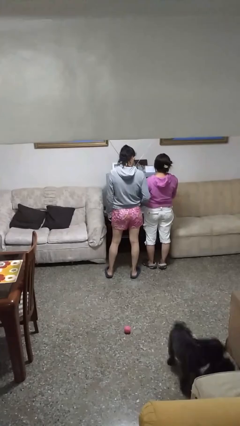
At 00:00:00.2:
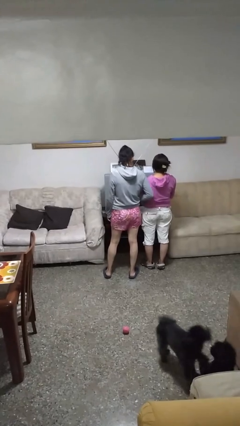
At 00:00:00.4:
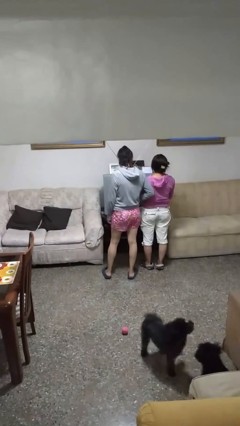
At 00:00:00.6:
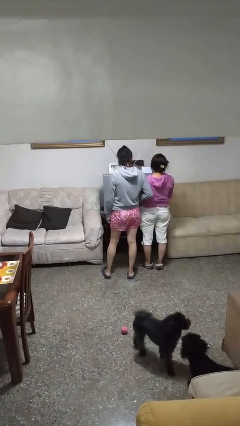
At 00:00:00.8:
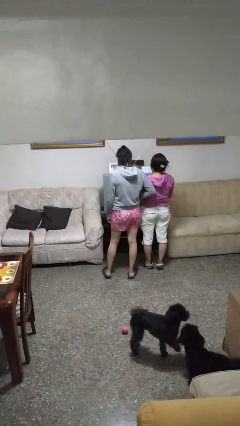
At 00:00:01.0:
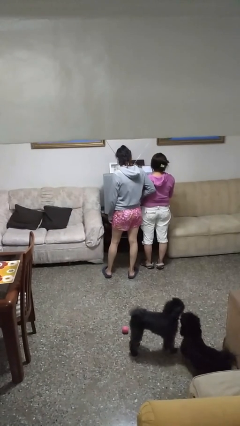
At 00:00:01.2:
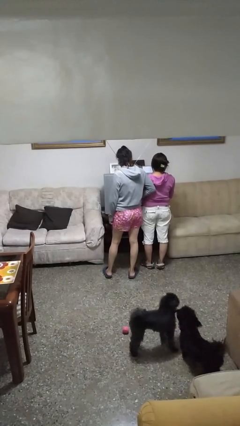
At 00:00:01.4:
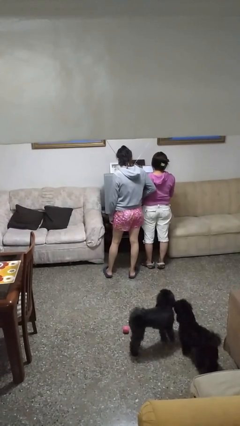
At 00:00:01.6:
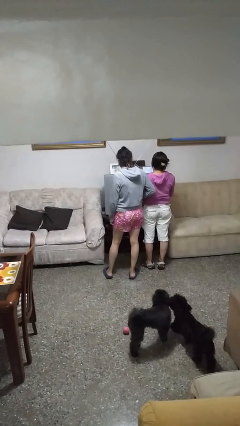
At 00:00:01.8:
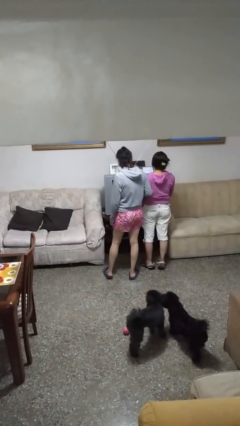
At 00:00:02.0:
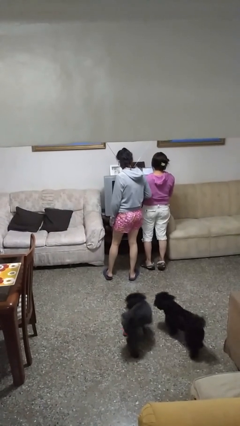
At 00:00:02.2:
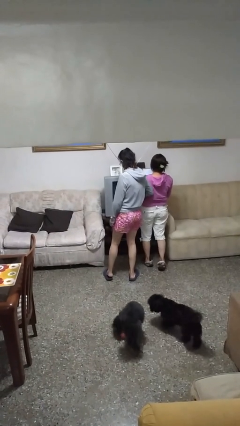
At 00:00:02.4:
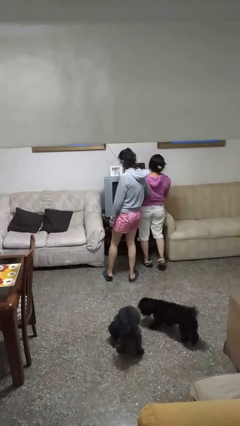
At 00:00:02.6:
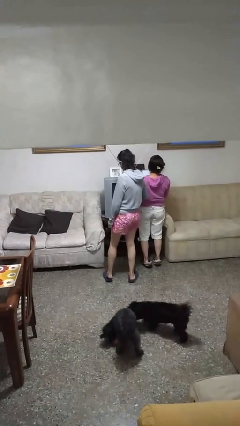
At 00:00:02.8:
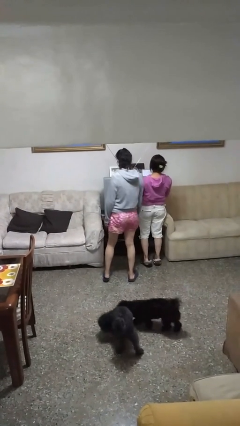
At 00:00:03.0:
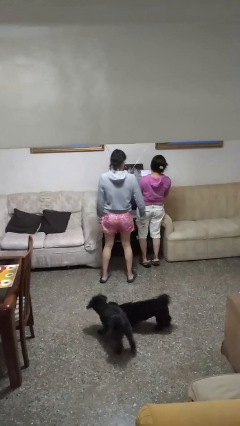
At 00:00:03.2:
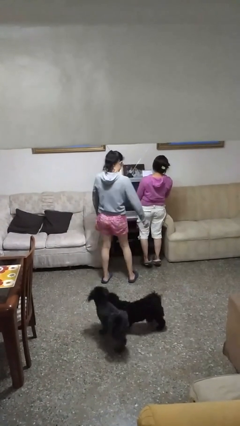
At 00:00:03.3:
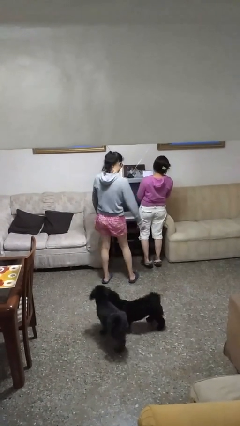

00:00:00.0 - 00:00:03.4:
person nudges person with elbow

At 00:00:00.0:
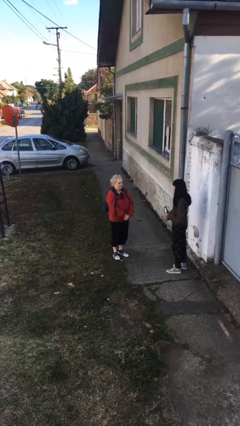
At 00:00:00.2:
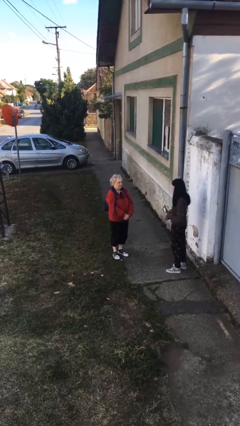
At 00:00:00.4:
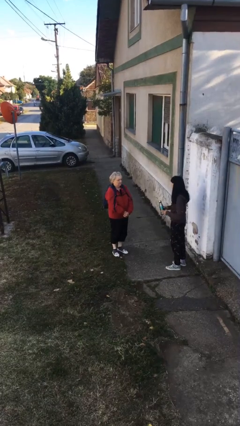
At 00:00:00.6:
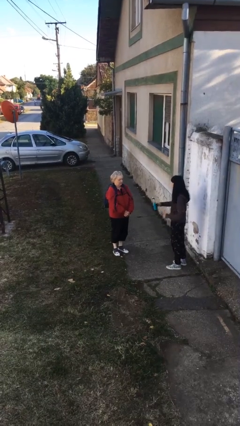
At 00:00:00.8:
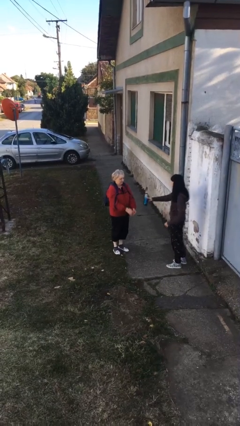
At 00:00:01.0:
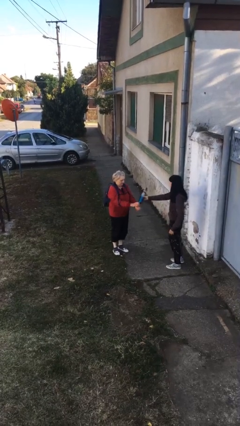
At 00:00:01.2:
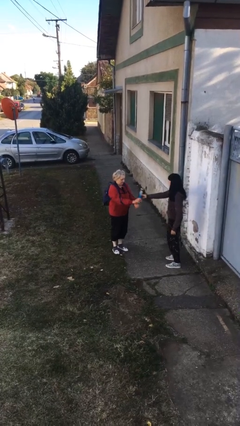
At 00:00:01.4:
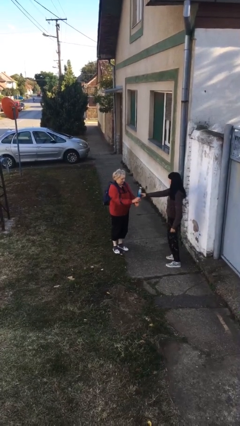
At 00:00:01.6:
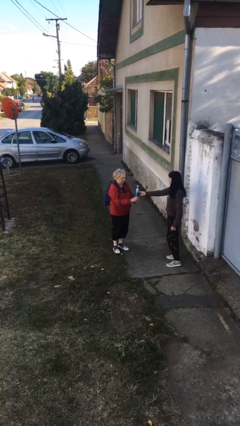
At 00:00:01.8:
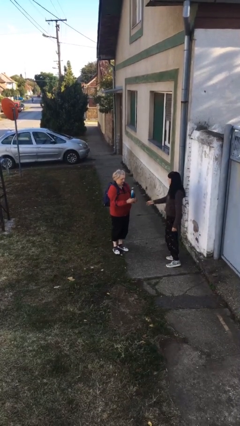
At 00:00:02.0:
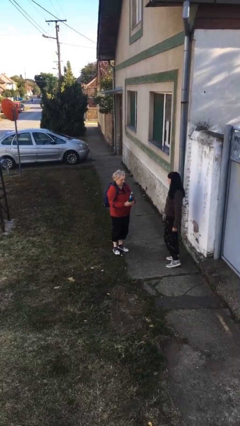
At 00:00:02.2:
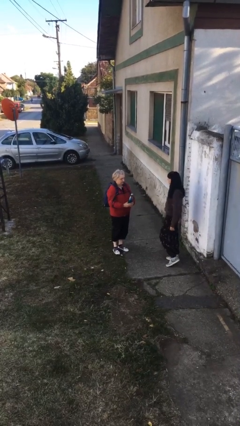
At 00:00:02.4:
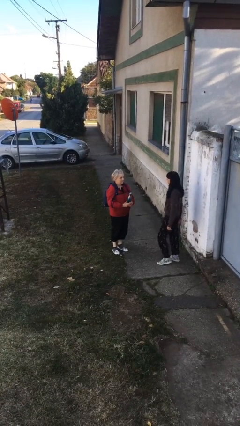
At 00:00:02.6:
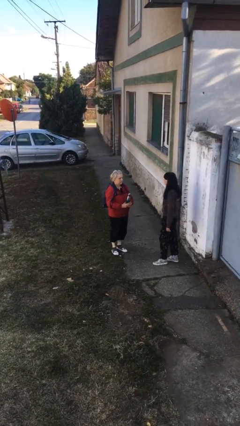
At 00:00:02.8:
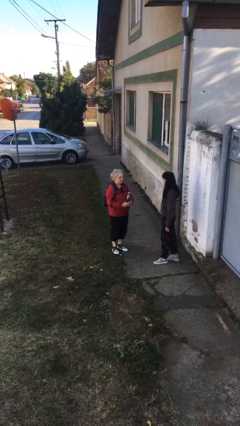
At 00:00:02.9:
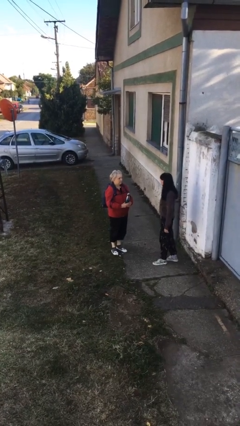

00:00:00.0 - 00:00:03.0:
person transfers object to person

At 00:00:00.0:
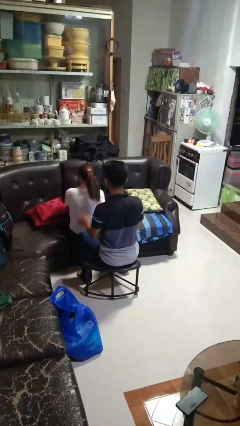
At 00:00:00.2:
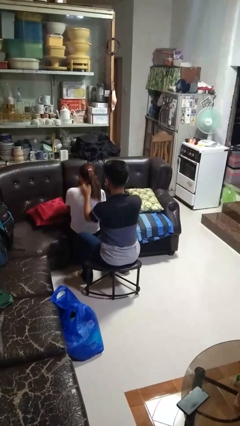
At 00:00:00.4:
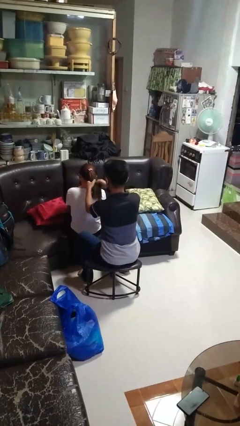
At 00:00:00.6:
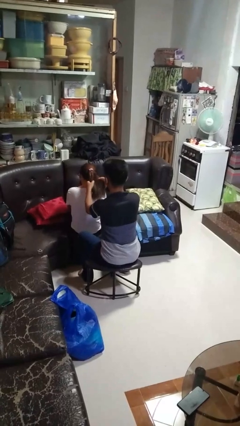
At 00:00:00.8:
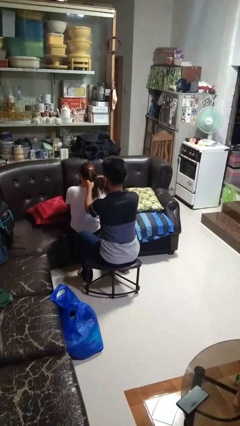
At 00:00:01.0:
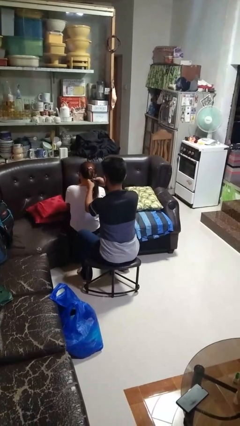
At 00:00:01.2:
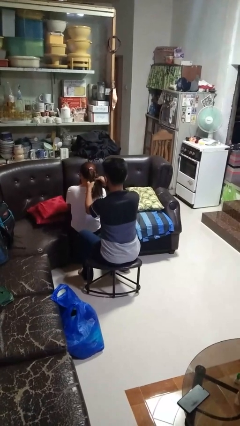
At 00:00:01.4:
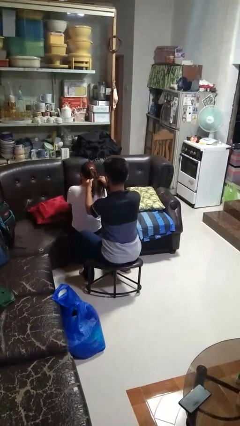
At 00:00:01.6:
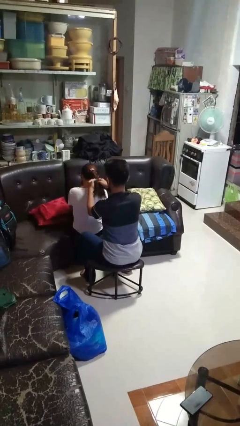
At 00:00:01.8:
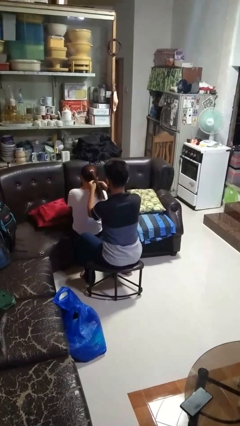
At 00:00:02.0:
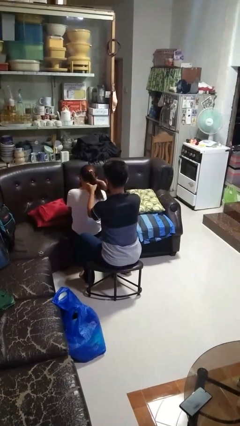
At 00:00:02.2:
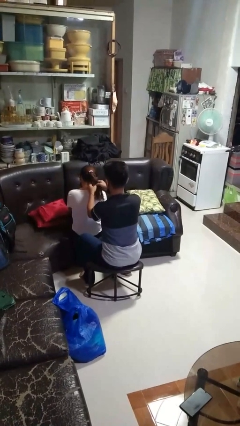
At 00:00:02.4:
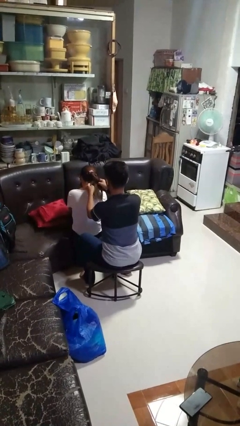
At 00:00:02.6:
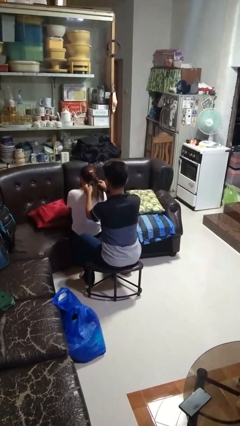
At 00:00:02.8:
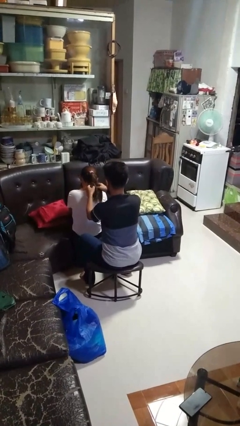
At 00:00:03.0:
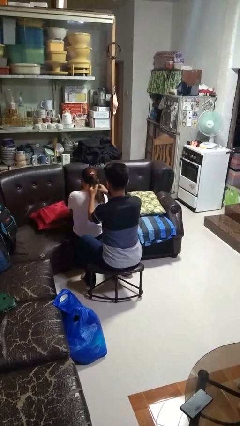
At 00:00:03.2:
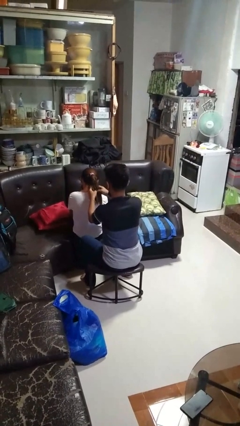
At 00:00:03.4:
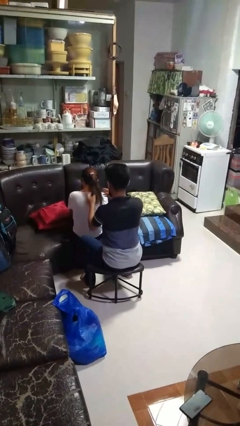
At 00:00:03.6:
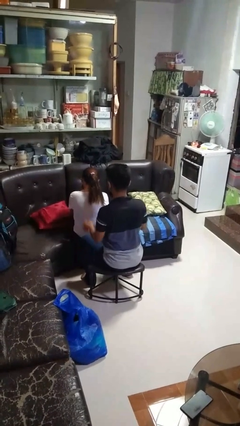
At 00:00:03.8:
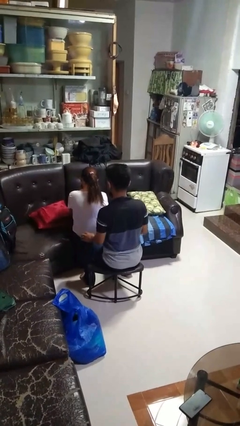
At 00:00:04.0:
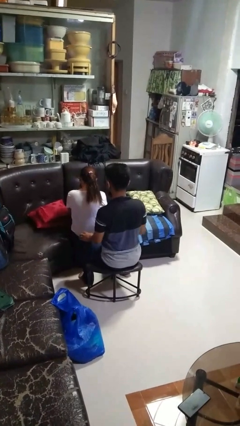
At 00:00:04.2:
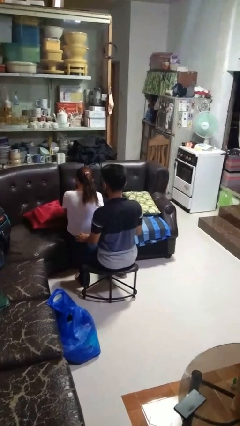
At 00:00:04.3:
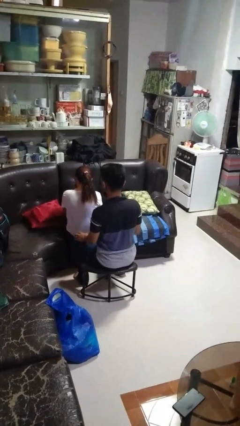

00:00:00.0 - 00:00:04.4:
person braids hair of person

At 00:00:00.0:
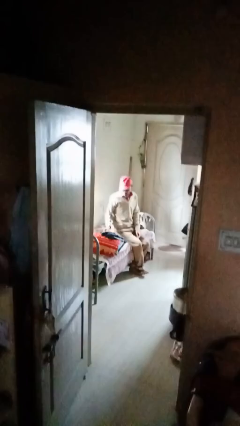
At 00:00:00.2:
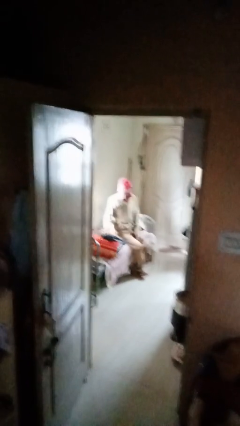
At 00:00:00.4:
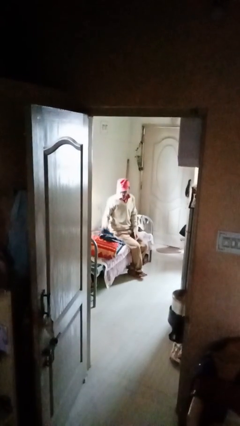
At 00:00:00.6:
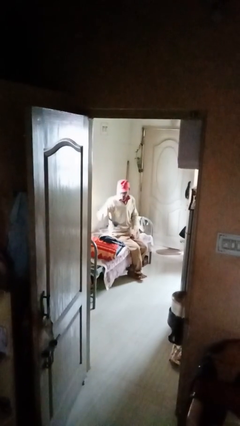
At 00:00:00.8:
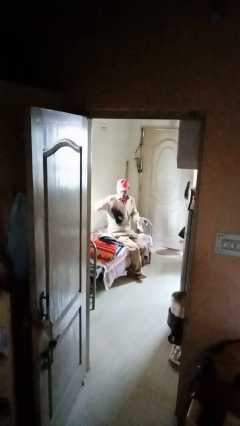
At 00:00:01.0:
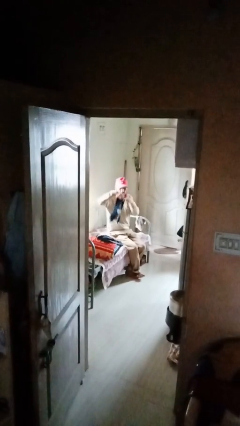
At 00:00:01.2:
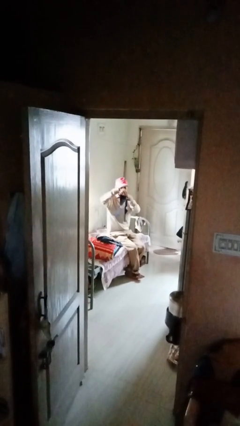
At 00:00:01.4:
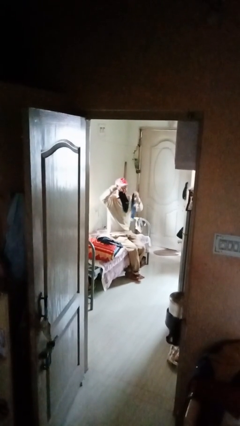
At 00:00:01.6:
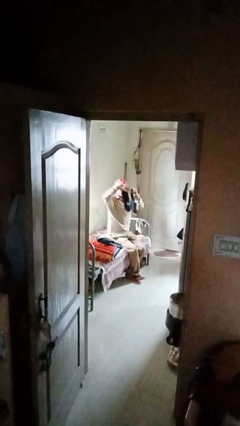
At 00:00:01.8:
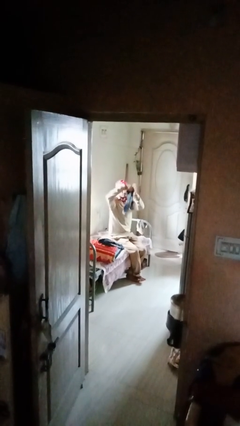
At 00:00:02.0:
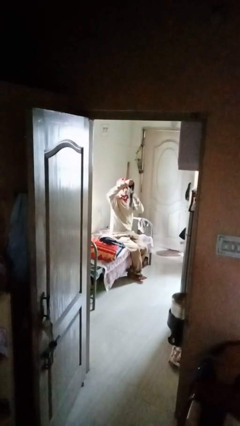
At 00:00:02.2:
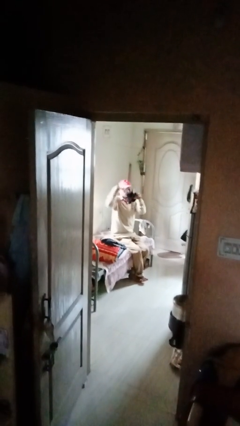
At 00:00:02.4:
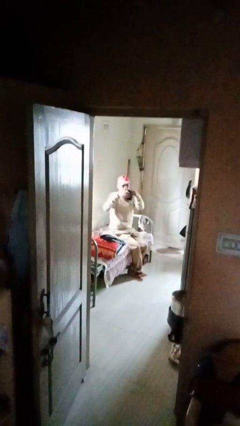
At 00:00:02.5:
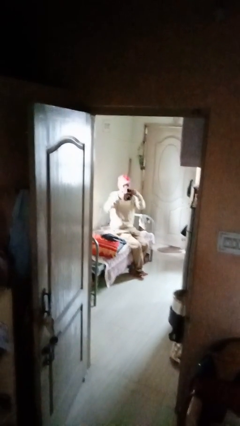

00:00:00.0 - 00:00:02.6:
person folds socks

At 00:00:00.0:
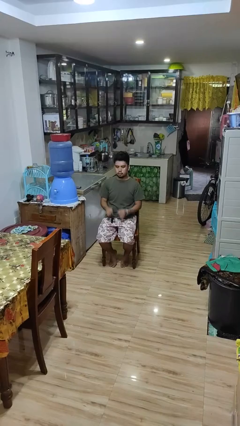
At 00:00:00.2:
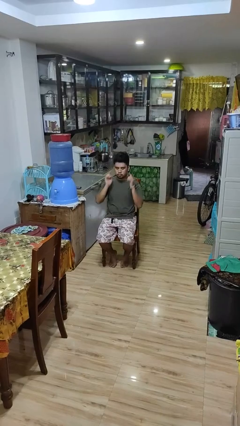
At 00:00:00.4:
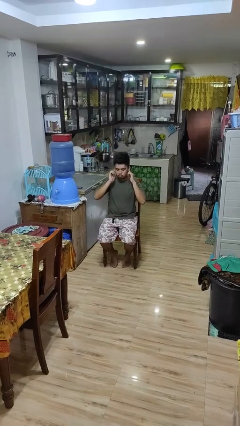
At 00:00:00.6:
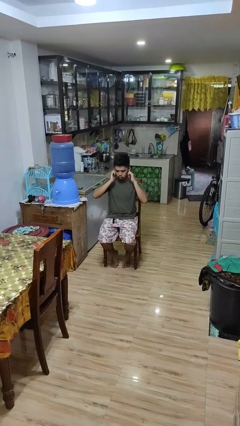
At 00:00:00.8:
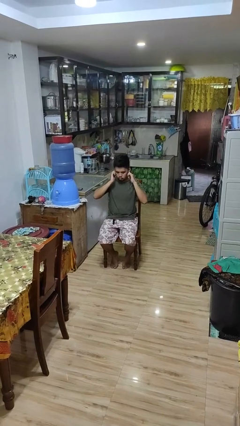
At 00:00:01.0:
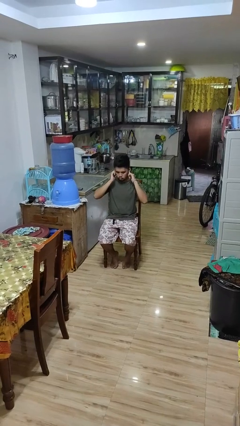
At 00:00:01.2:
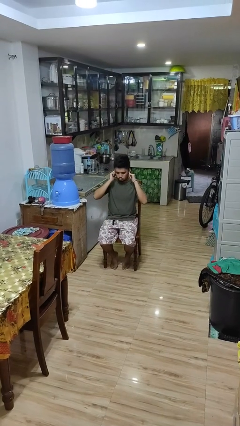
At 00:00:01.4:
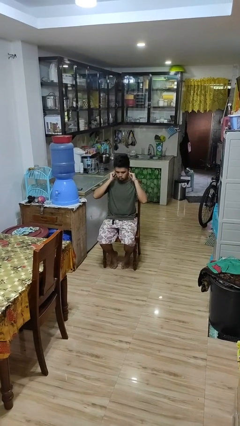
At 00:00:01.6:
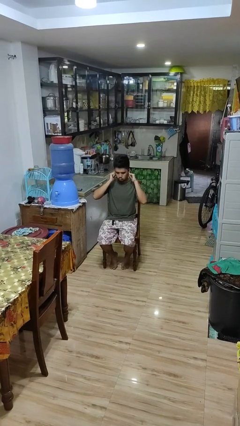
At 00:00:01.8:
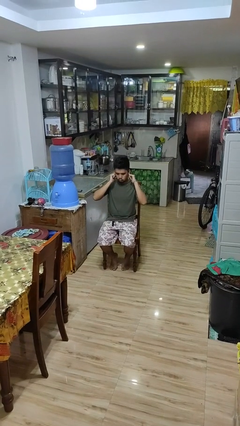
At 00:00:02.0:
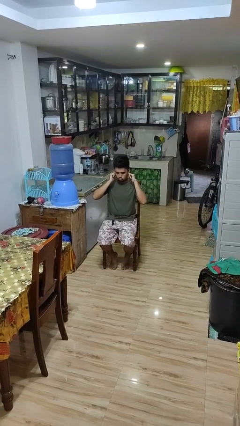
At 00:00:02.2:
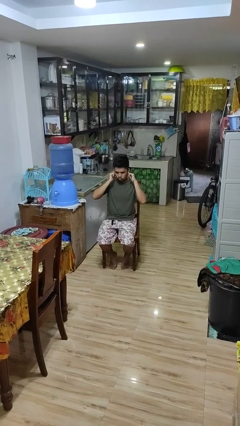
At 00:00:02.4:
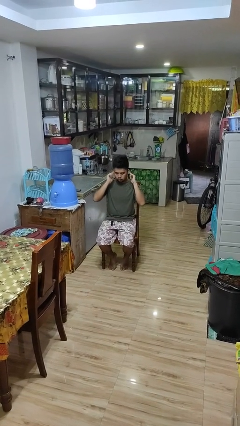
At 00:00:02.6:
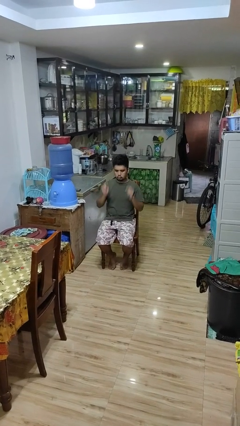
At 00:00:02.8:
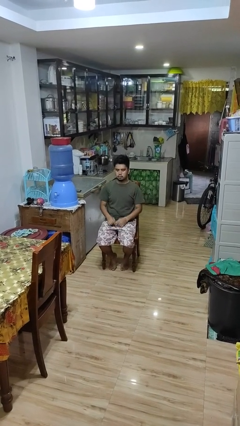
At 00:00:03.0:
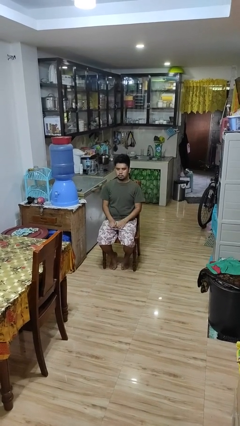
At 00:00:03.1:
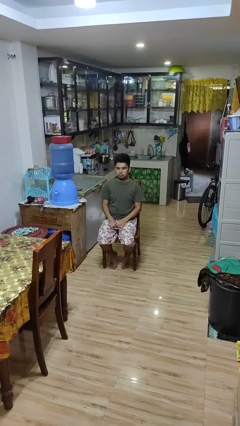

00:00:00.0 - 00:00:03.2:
person puts fingers in ear

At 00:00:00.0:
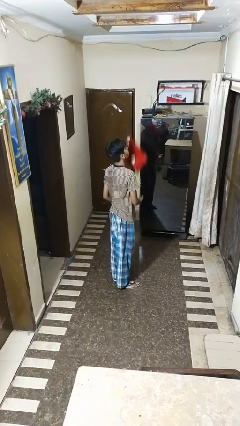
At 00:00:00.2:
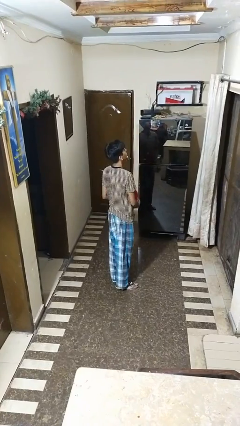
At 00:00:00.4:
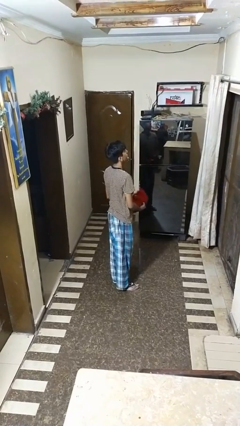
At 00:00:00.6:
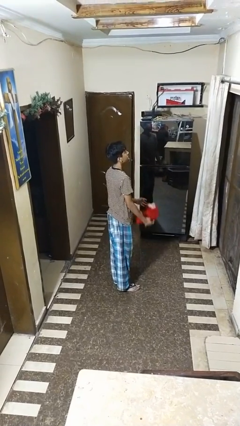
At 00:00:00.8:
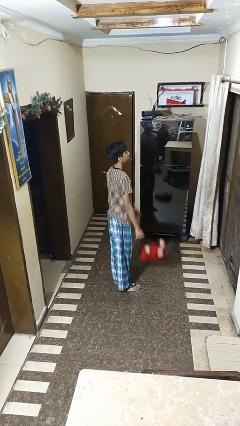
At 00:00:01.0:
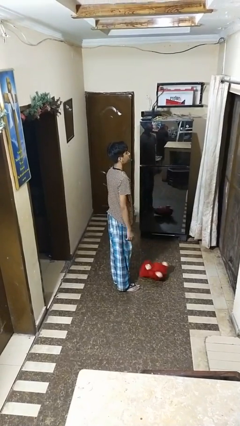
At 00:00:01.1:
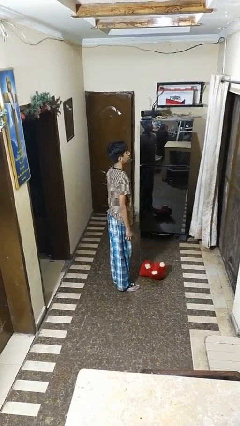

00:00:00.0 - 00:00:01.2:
person catches dropped object
